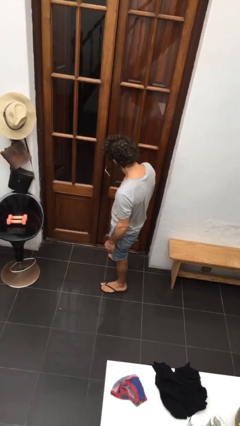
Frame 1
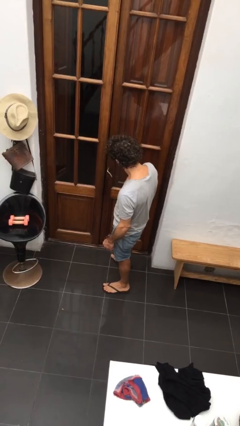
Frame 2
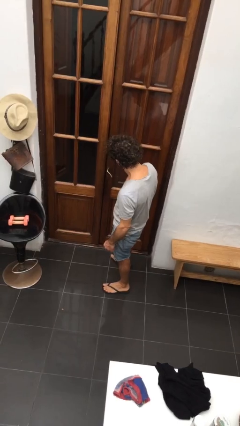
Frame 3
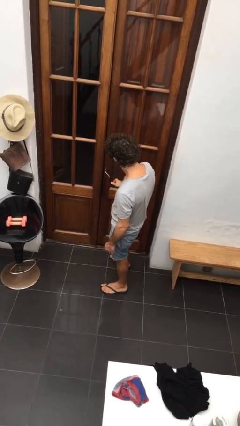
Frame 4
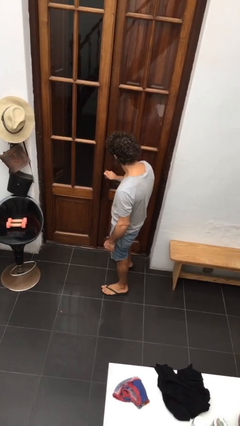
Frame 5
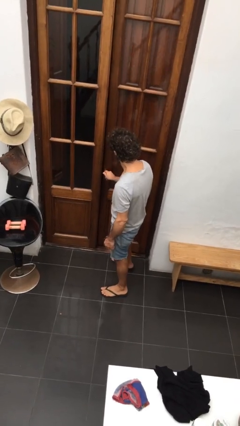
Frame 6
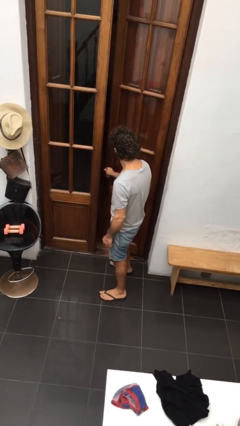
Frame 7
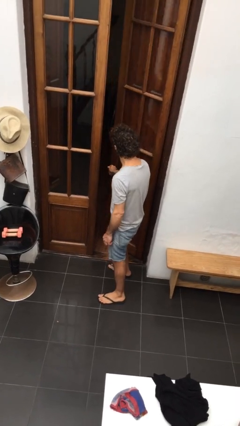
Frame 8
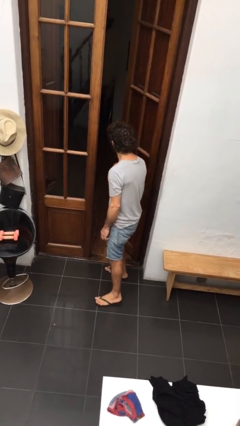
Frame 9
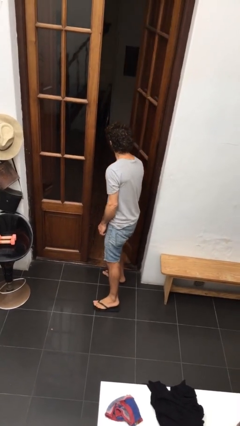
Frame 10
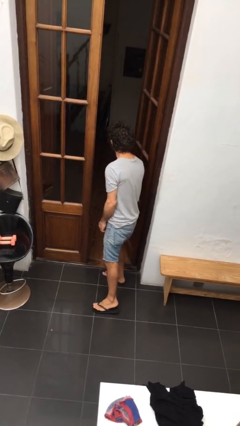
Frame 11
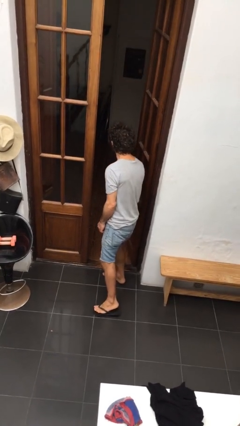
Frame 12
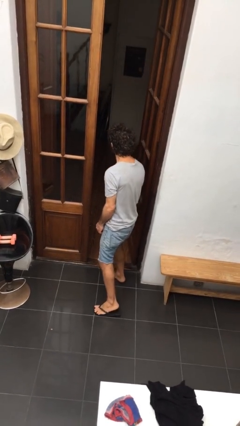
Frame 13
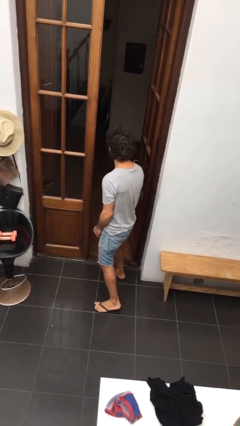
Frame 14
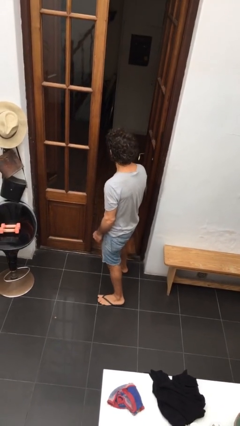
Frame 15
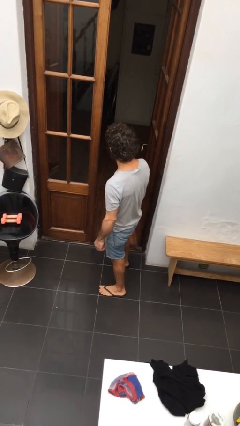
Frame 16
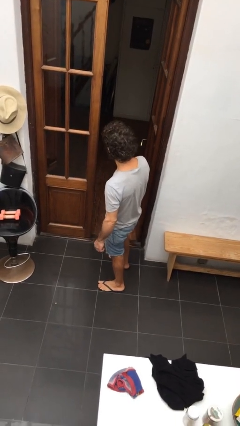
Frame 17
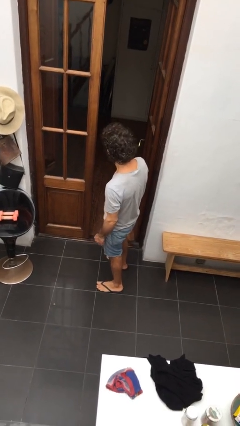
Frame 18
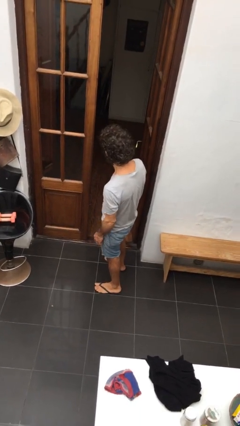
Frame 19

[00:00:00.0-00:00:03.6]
person opens facility door

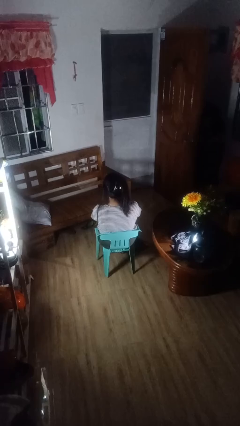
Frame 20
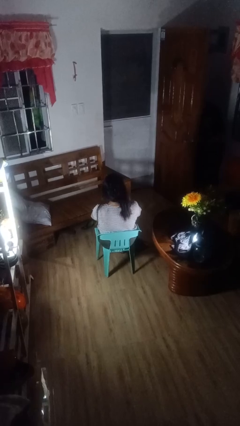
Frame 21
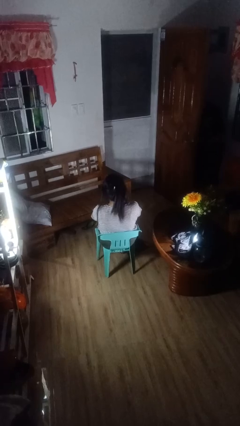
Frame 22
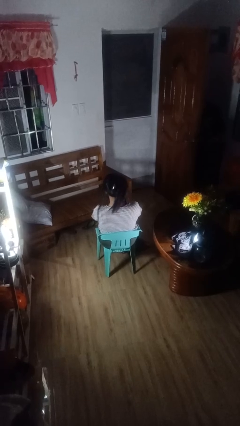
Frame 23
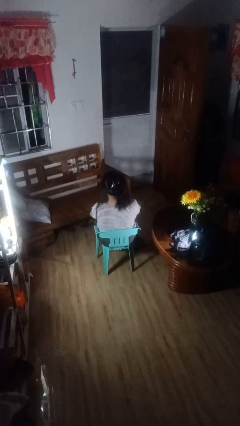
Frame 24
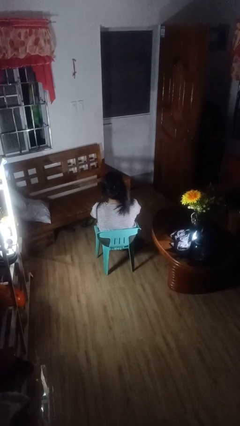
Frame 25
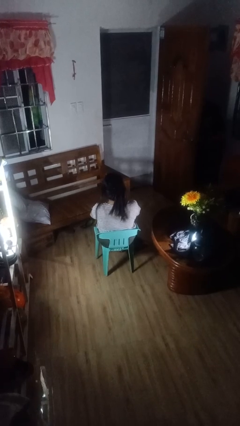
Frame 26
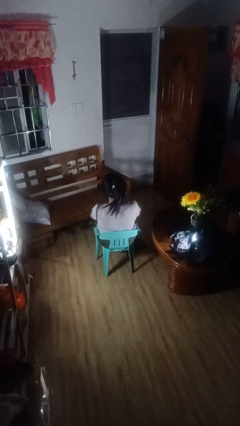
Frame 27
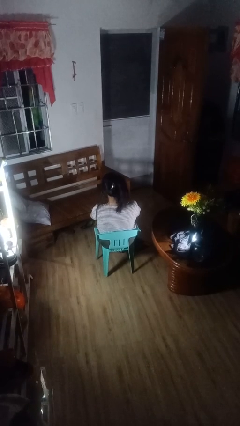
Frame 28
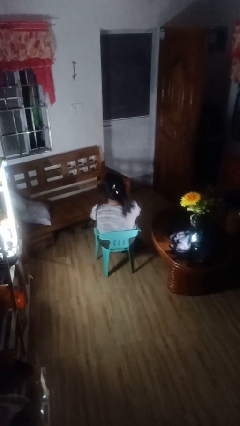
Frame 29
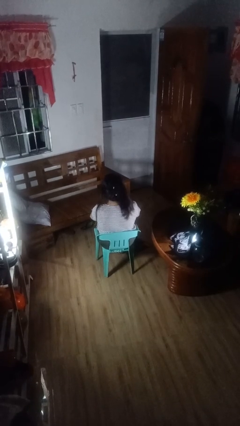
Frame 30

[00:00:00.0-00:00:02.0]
person nods head

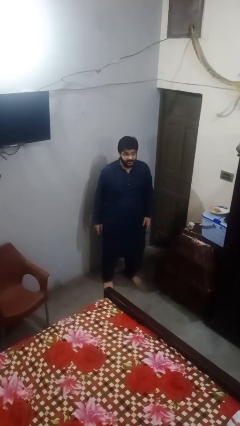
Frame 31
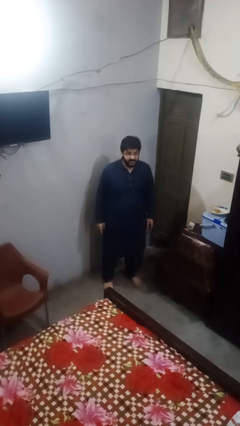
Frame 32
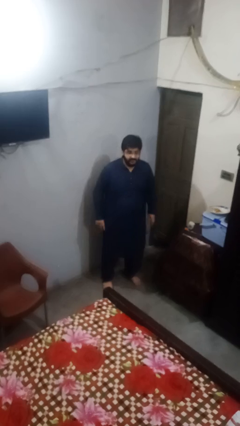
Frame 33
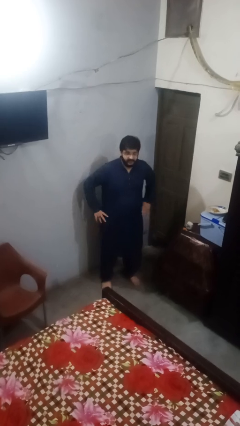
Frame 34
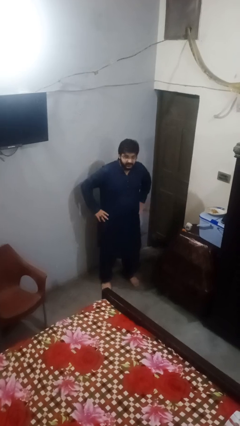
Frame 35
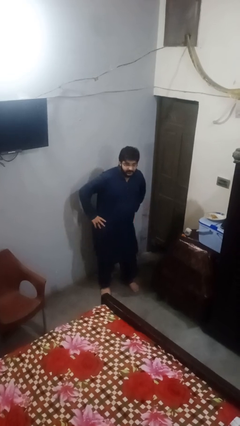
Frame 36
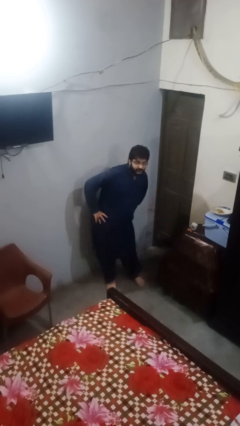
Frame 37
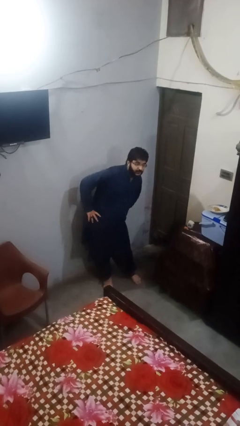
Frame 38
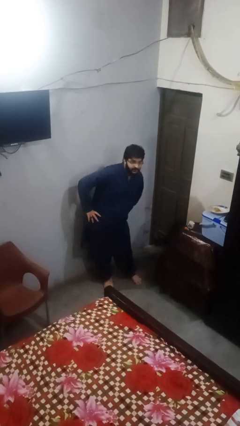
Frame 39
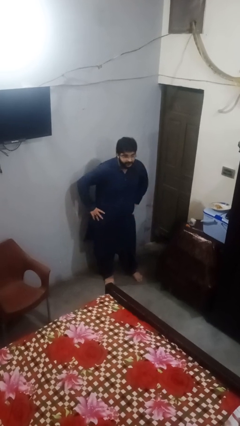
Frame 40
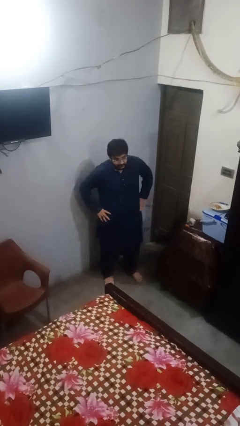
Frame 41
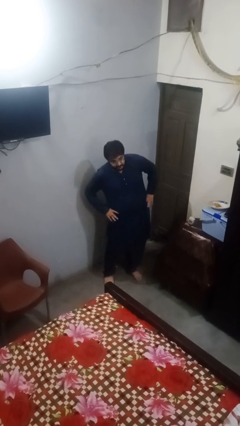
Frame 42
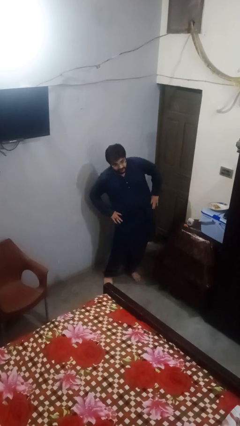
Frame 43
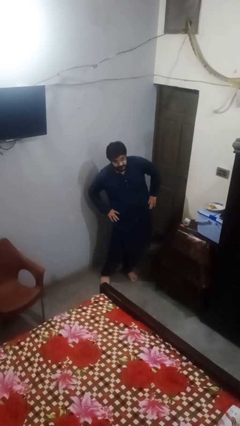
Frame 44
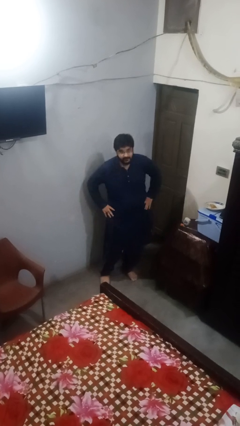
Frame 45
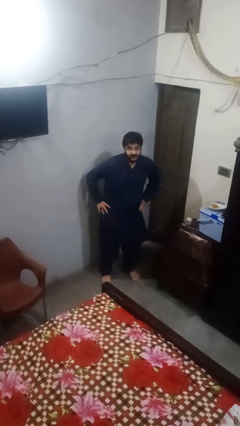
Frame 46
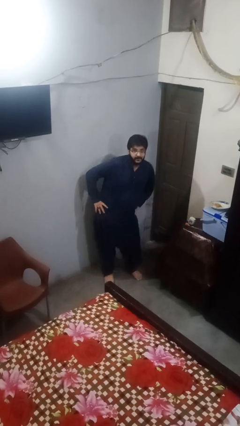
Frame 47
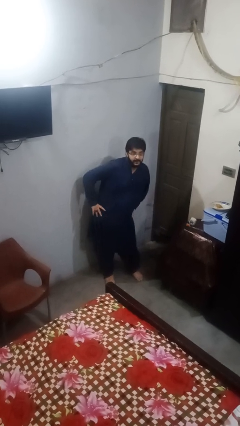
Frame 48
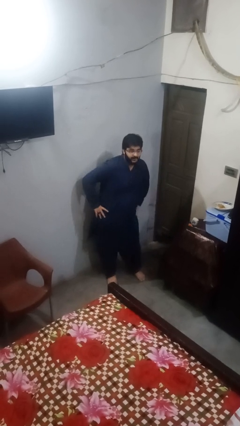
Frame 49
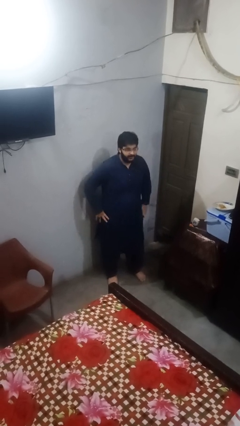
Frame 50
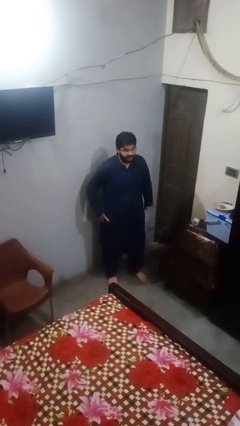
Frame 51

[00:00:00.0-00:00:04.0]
person wiggles hips

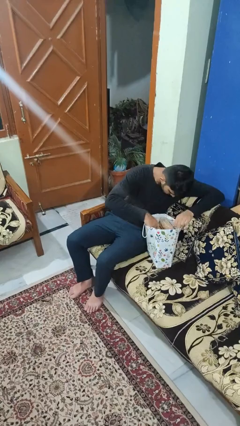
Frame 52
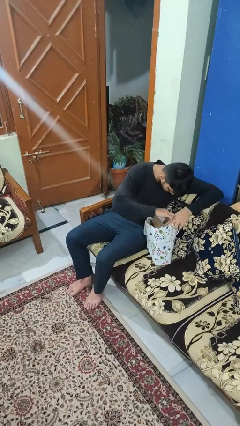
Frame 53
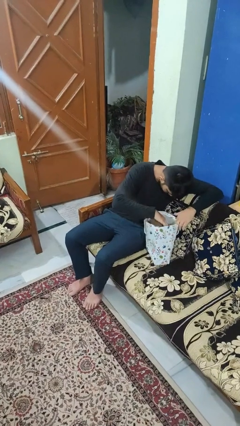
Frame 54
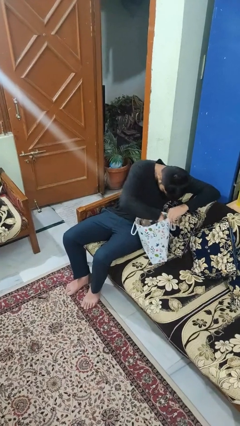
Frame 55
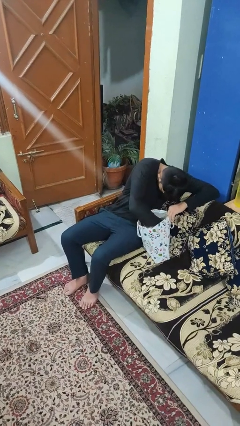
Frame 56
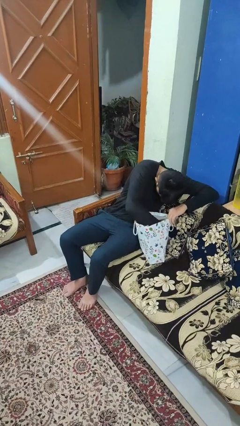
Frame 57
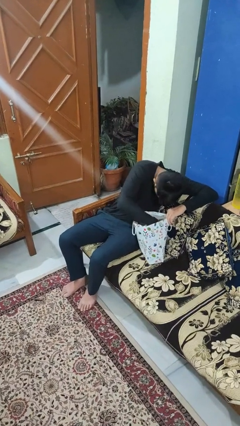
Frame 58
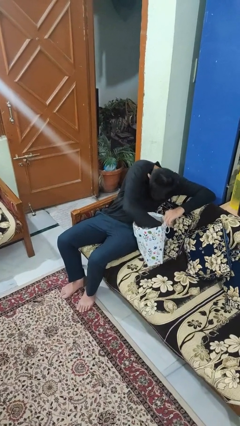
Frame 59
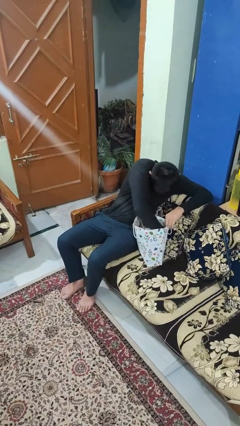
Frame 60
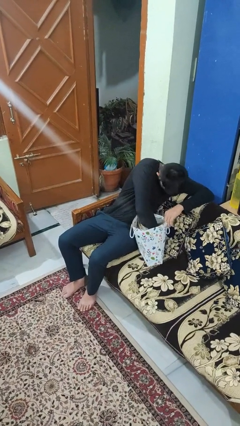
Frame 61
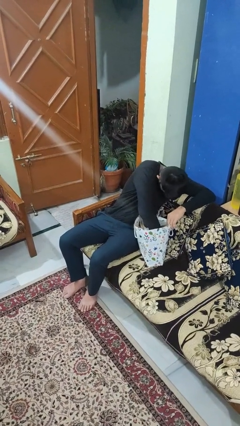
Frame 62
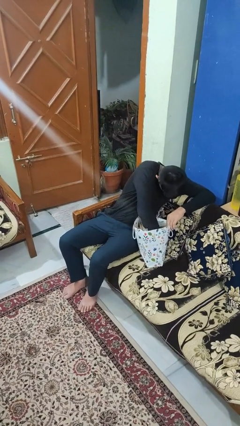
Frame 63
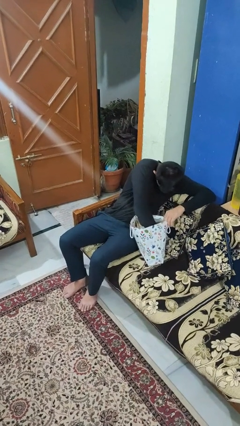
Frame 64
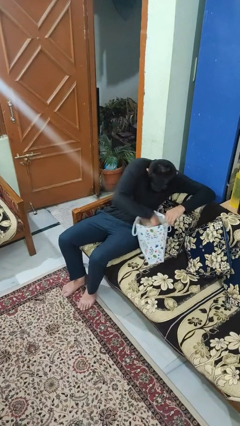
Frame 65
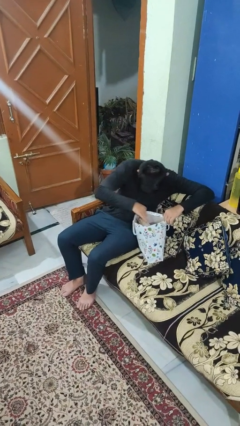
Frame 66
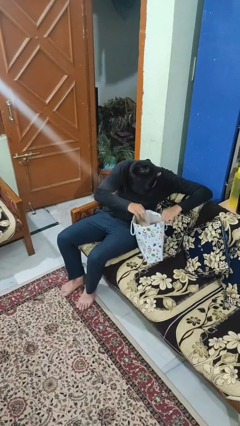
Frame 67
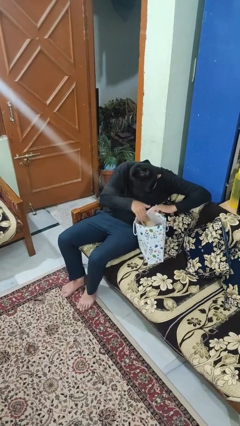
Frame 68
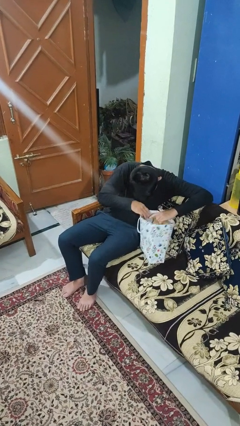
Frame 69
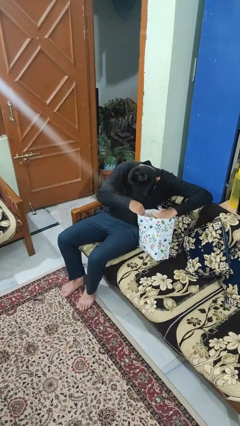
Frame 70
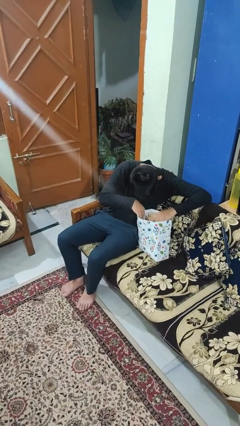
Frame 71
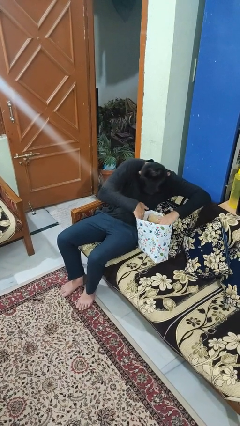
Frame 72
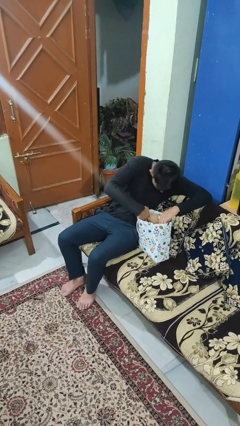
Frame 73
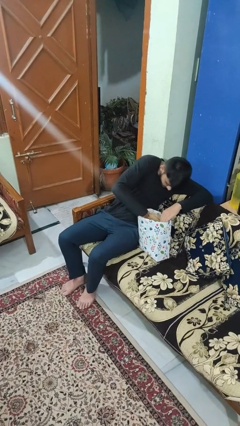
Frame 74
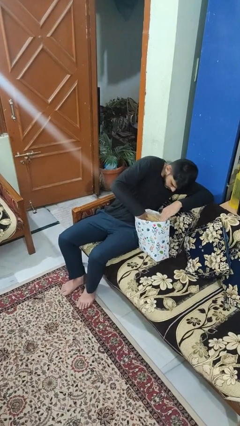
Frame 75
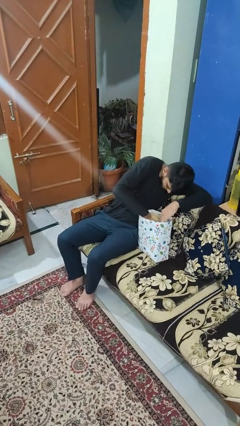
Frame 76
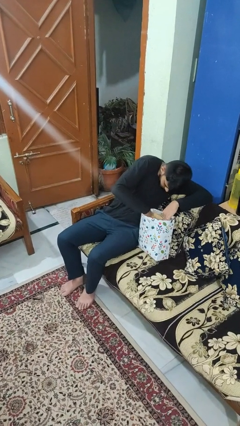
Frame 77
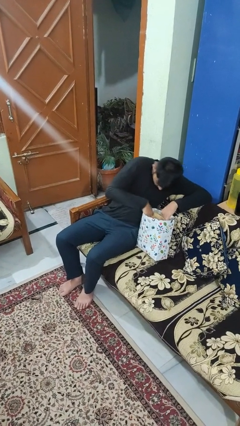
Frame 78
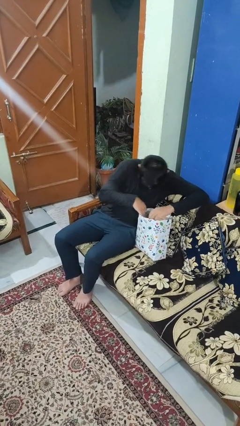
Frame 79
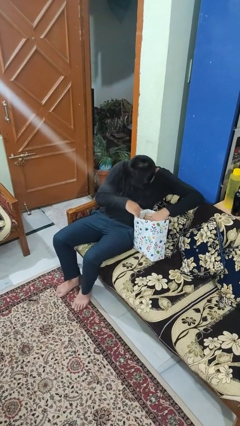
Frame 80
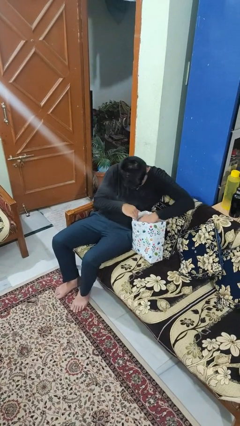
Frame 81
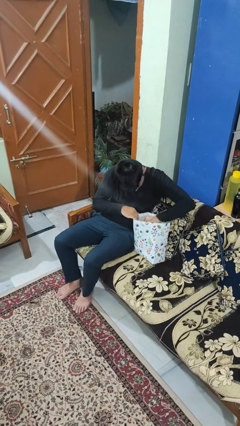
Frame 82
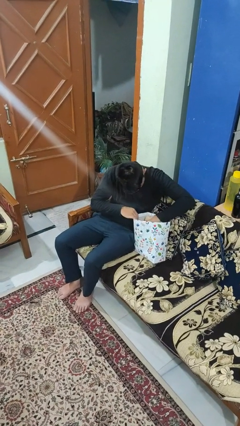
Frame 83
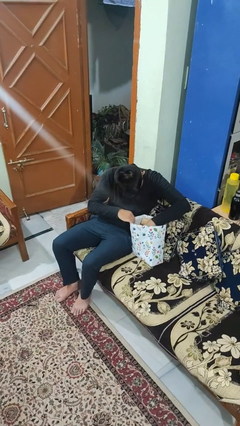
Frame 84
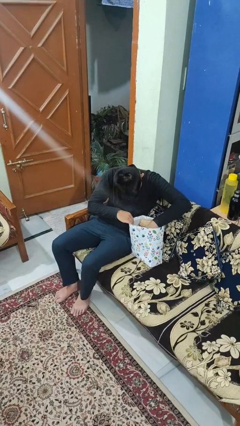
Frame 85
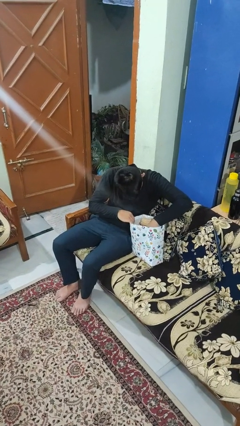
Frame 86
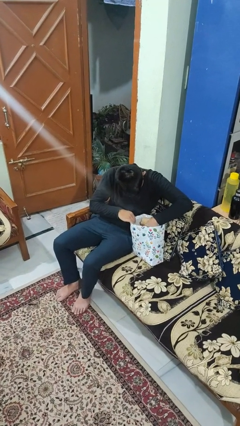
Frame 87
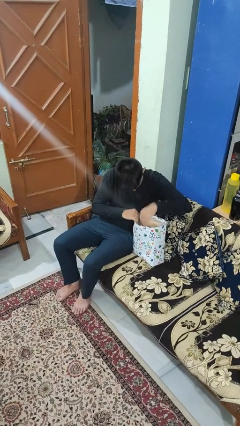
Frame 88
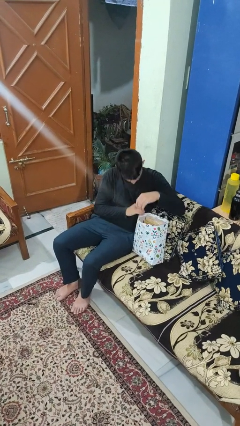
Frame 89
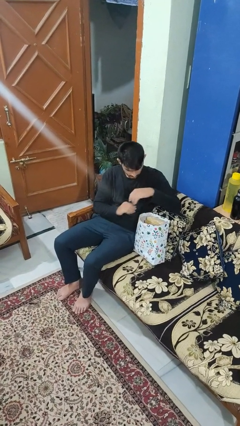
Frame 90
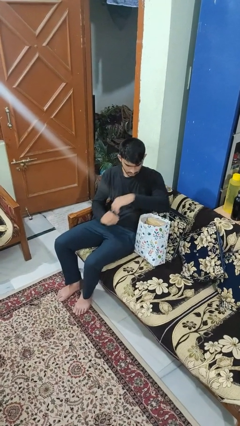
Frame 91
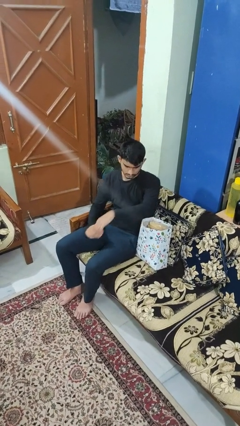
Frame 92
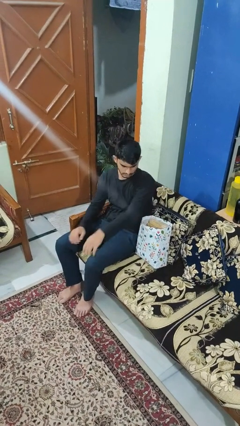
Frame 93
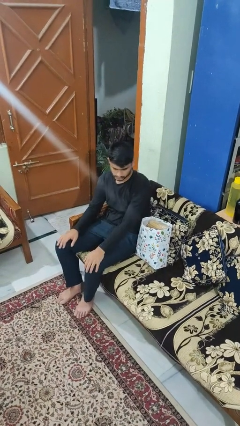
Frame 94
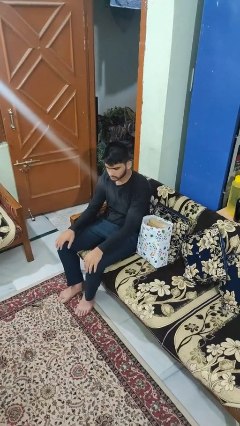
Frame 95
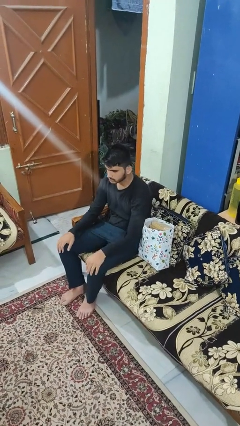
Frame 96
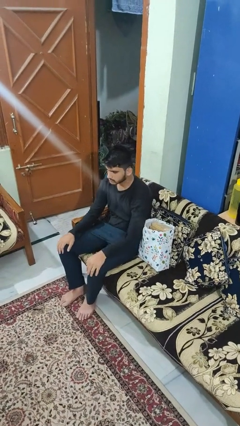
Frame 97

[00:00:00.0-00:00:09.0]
person searches in bag
